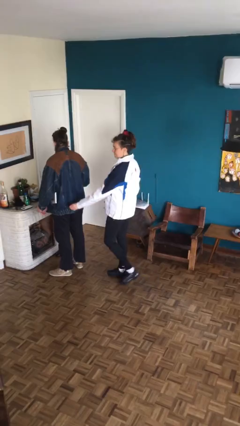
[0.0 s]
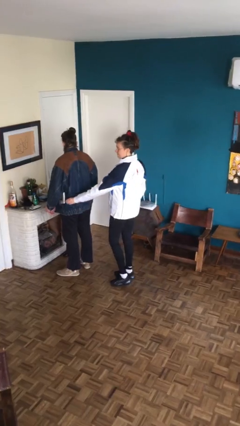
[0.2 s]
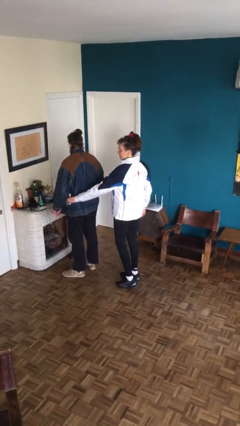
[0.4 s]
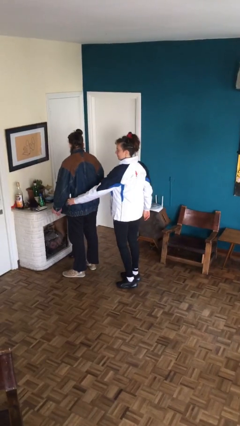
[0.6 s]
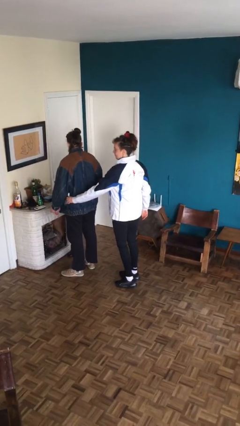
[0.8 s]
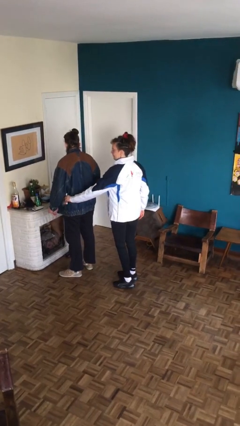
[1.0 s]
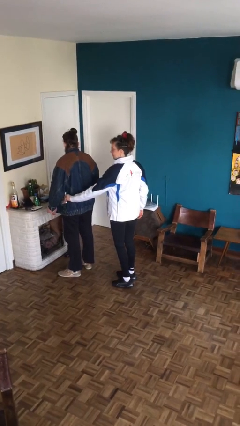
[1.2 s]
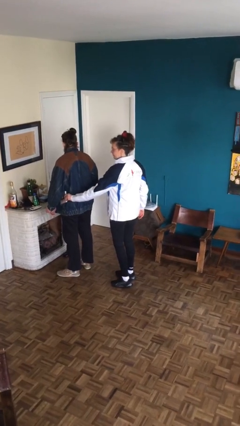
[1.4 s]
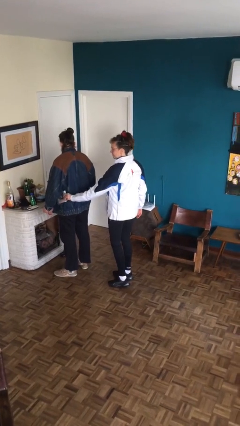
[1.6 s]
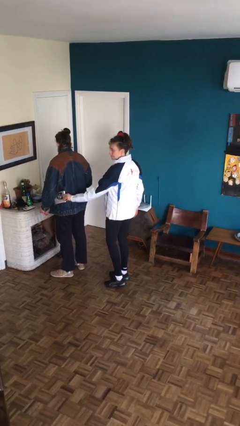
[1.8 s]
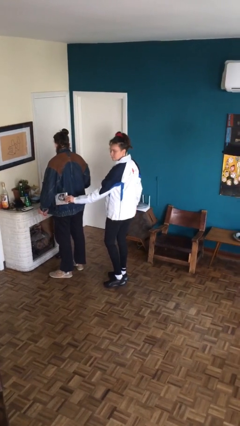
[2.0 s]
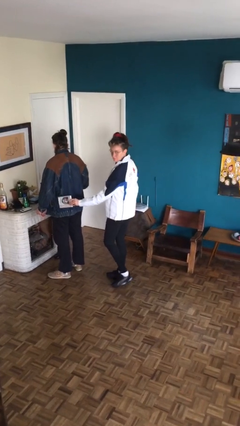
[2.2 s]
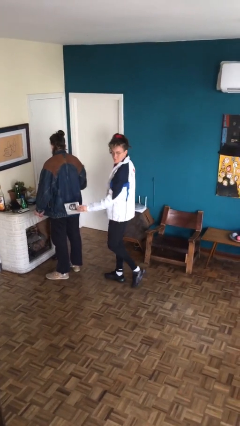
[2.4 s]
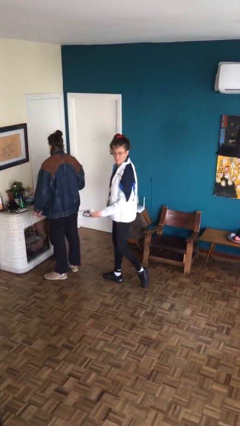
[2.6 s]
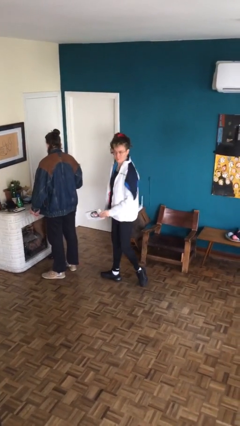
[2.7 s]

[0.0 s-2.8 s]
person steals object from person

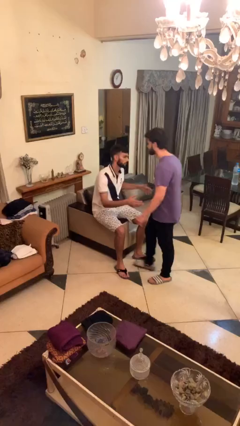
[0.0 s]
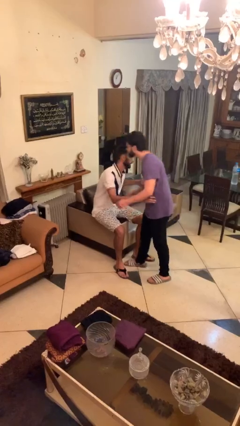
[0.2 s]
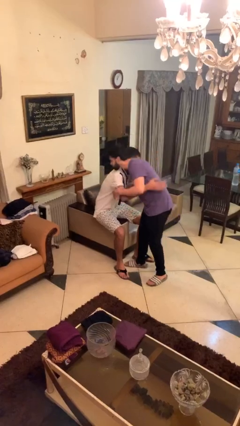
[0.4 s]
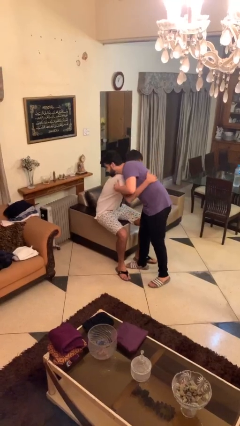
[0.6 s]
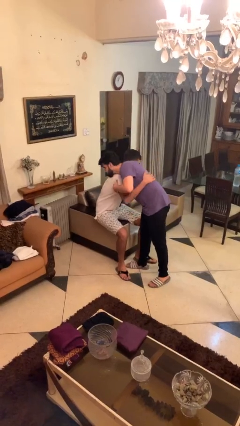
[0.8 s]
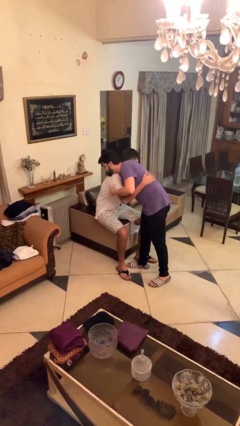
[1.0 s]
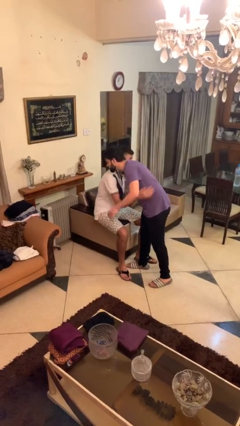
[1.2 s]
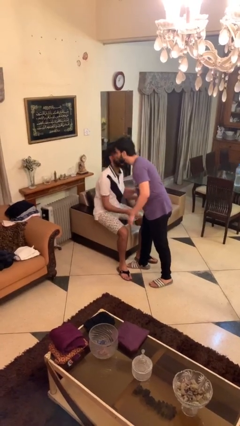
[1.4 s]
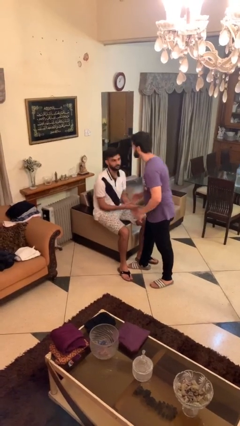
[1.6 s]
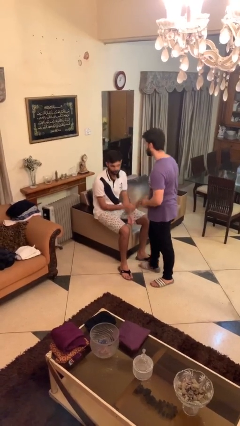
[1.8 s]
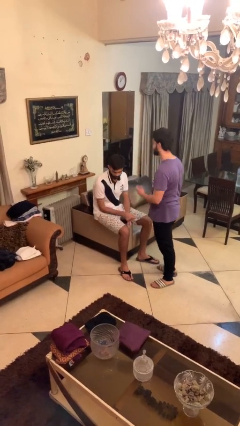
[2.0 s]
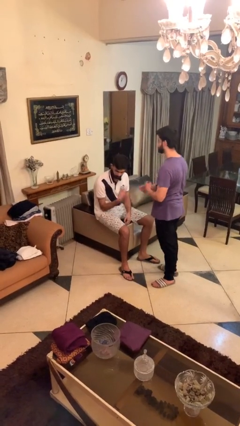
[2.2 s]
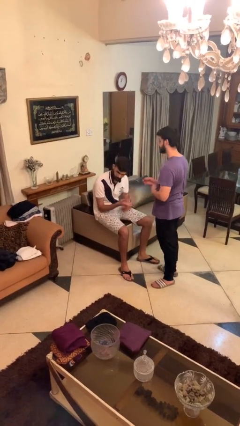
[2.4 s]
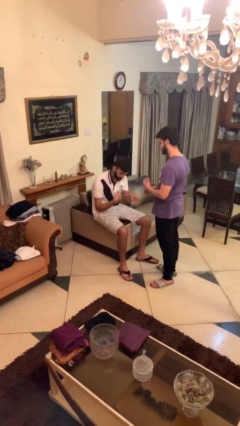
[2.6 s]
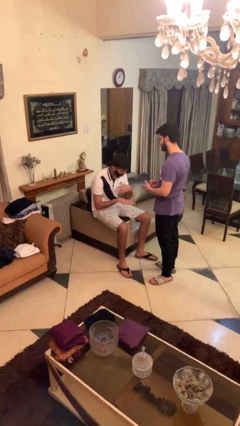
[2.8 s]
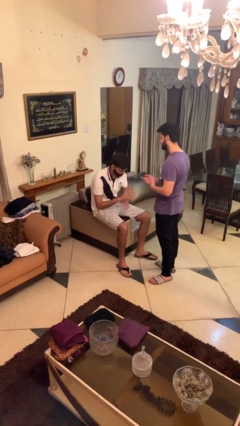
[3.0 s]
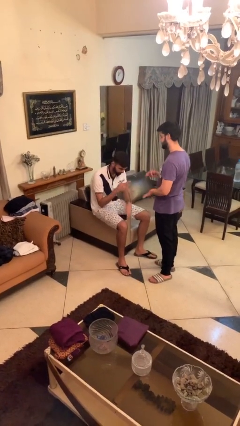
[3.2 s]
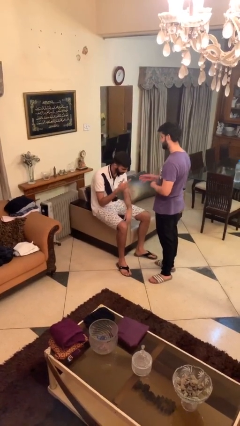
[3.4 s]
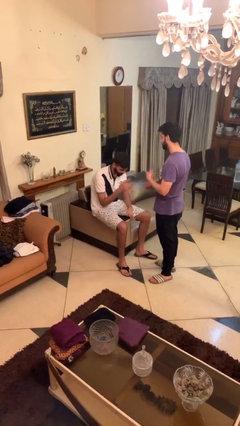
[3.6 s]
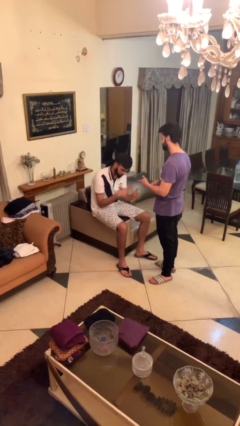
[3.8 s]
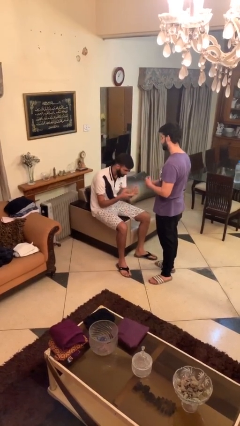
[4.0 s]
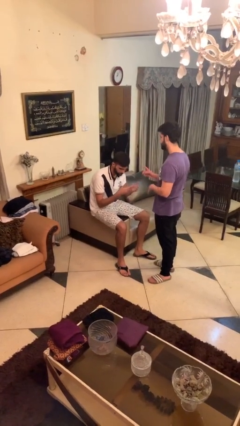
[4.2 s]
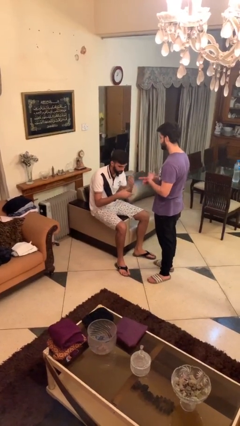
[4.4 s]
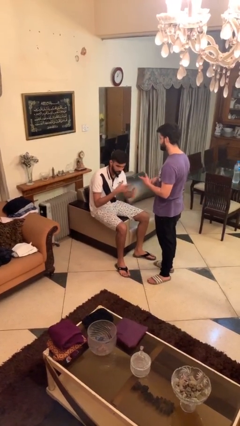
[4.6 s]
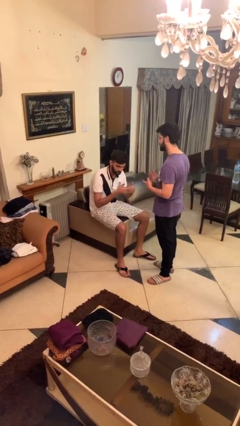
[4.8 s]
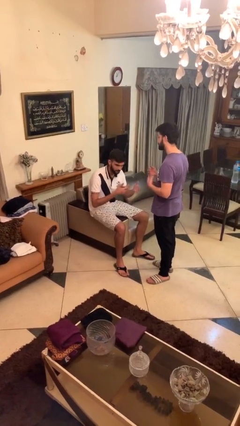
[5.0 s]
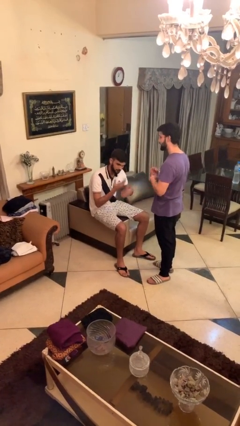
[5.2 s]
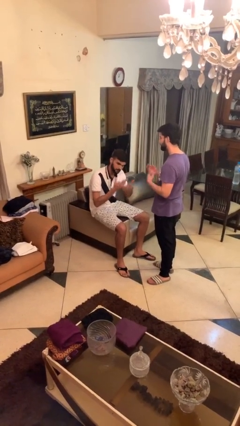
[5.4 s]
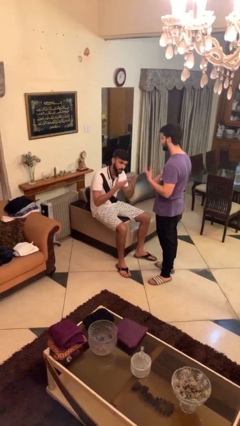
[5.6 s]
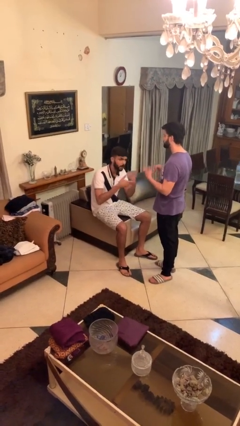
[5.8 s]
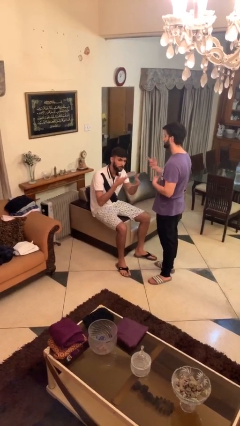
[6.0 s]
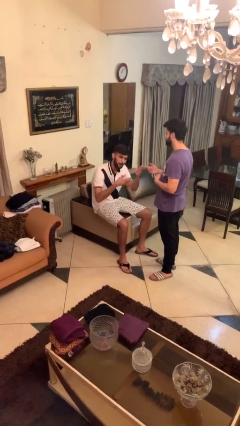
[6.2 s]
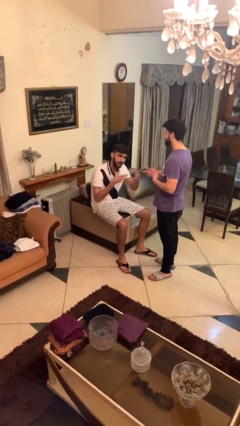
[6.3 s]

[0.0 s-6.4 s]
person embraces person

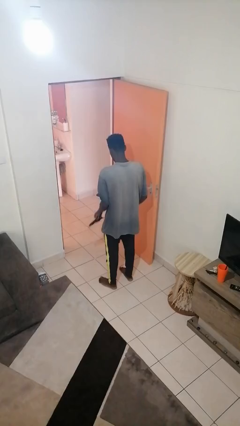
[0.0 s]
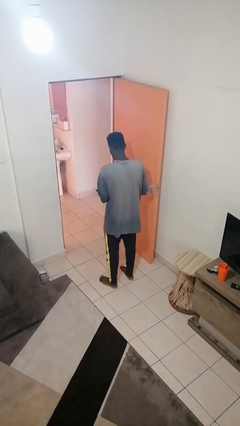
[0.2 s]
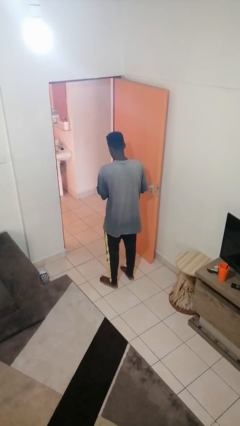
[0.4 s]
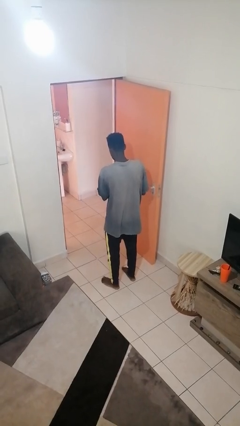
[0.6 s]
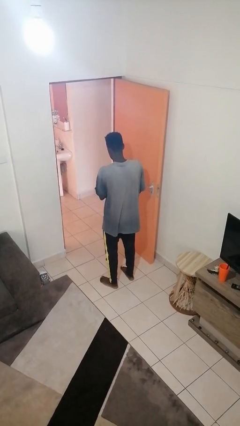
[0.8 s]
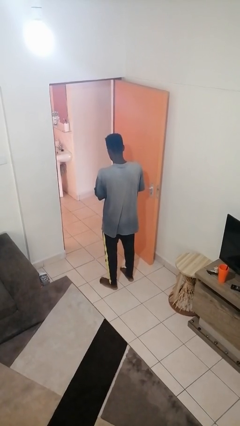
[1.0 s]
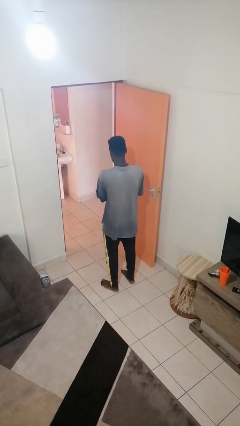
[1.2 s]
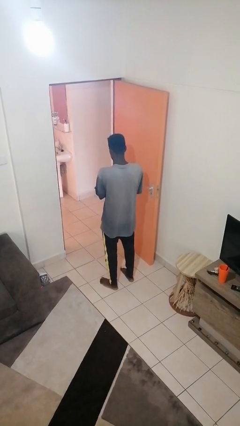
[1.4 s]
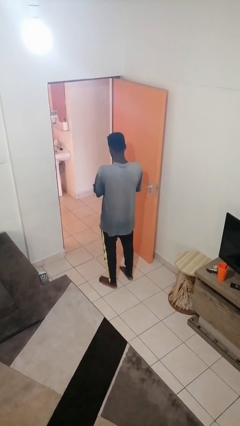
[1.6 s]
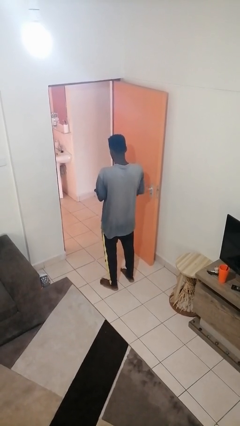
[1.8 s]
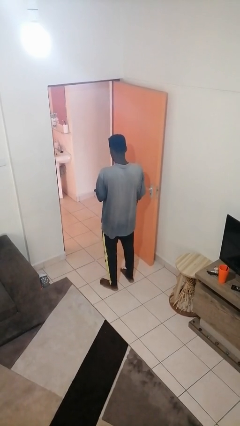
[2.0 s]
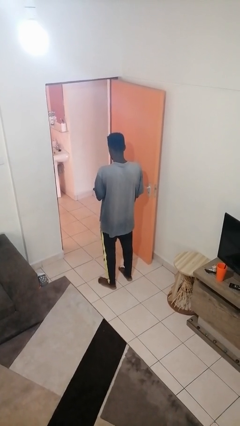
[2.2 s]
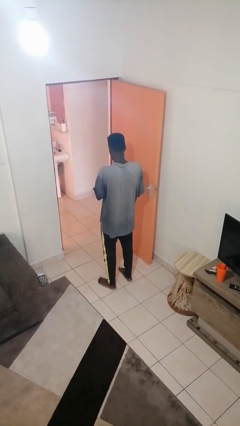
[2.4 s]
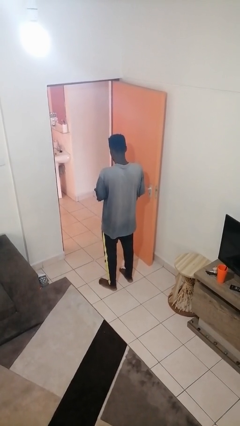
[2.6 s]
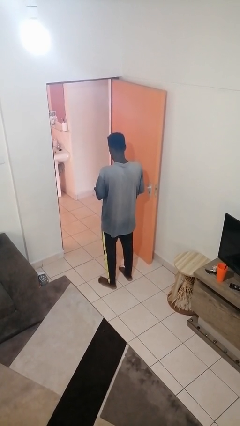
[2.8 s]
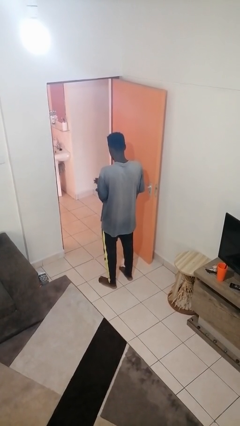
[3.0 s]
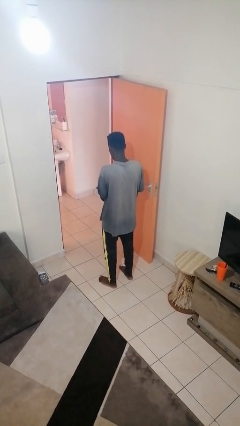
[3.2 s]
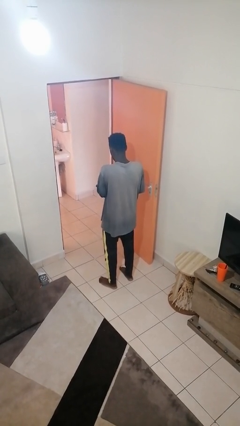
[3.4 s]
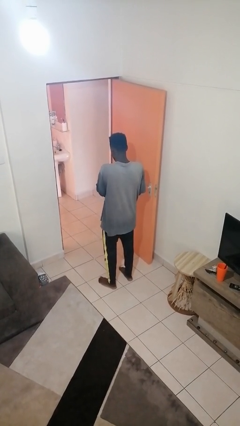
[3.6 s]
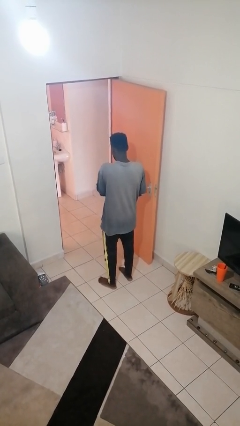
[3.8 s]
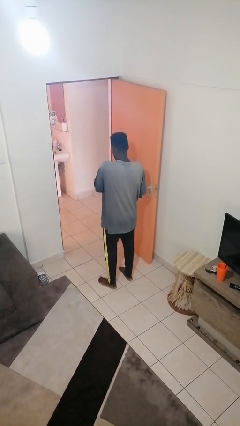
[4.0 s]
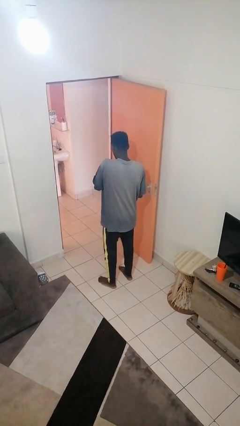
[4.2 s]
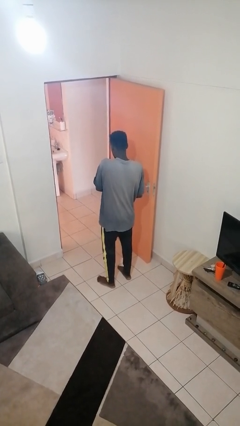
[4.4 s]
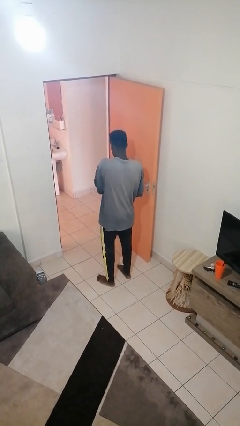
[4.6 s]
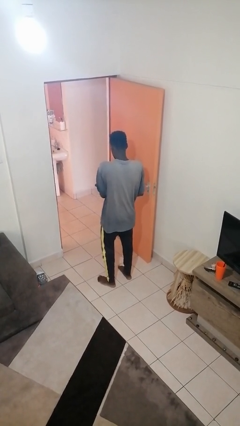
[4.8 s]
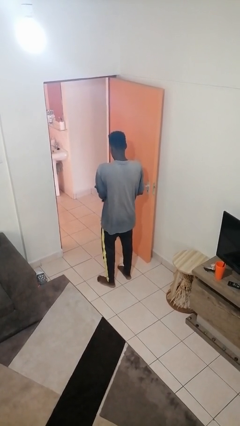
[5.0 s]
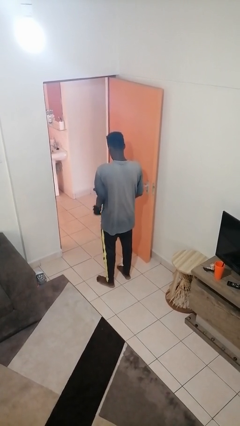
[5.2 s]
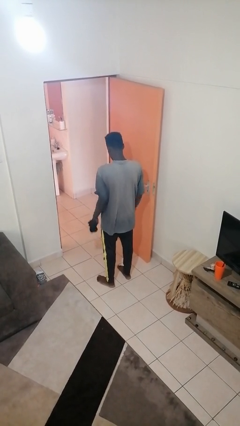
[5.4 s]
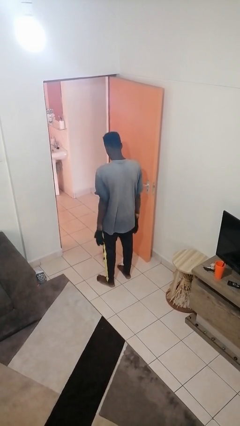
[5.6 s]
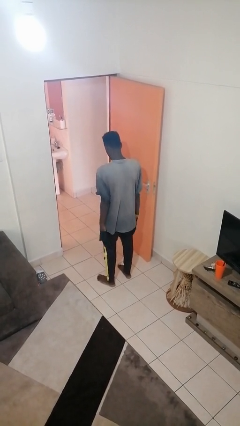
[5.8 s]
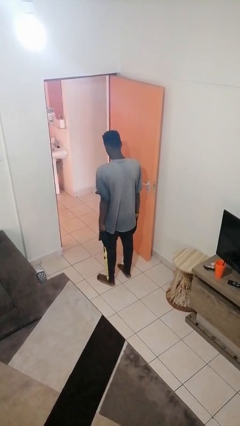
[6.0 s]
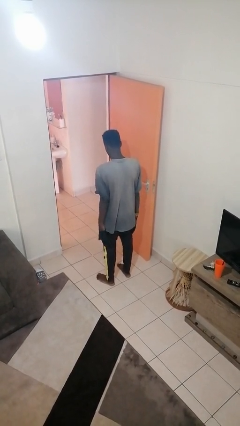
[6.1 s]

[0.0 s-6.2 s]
person puts on gloves

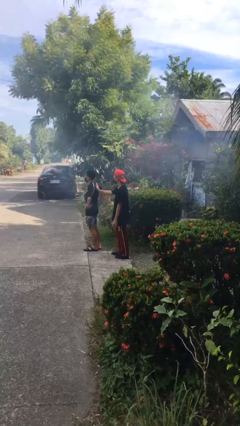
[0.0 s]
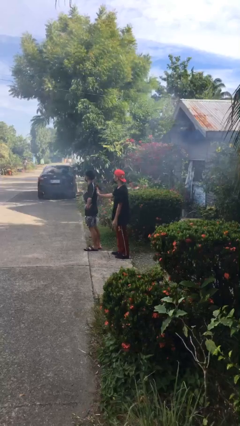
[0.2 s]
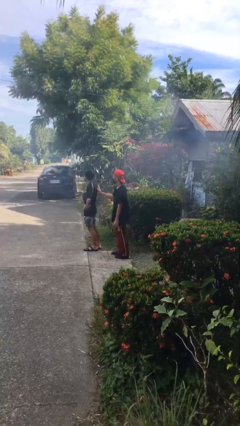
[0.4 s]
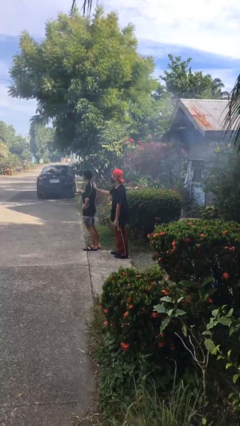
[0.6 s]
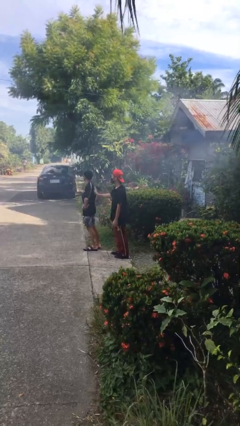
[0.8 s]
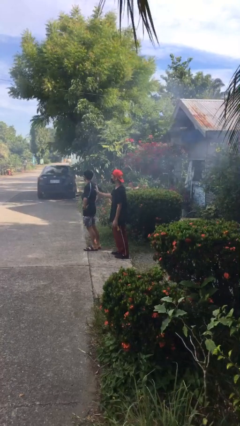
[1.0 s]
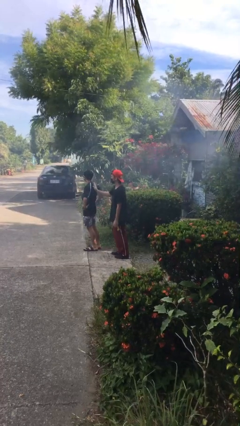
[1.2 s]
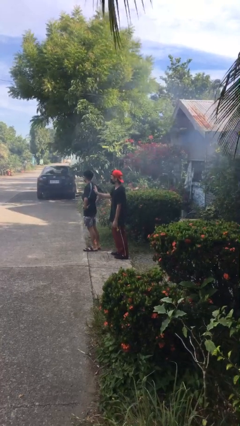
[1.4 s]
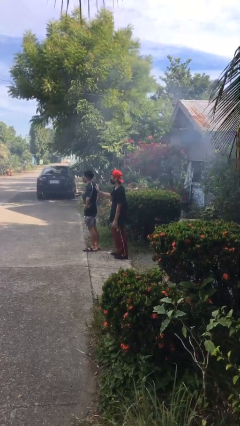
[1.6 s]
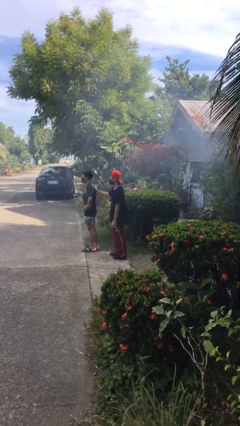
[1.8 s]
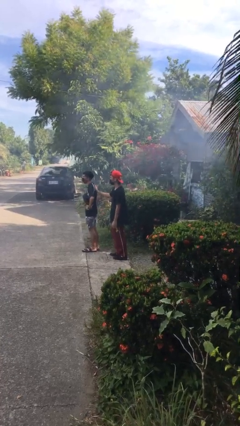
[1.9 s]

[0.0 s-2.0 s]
person touches back of person

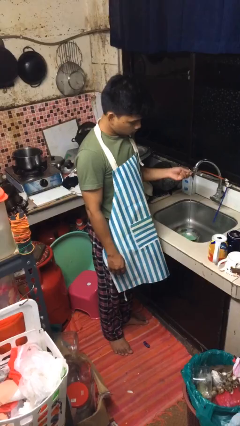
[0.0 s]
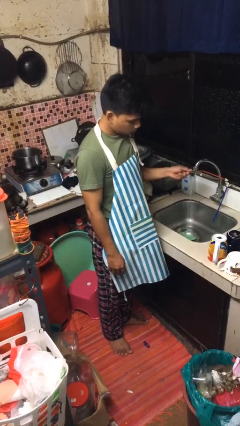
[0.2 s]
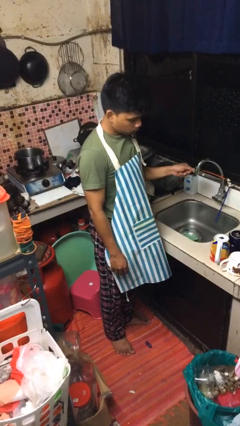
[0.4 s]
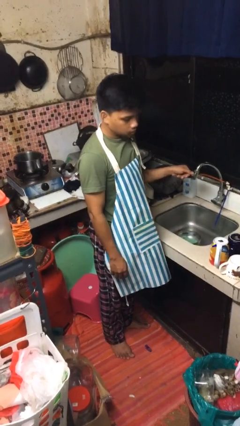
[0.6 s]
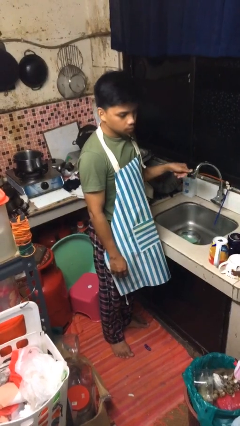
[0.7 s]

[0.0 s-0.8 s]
person turns off faucet
